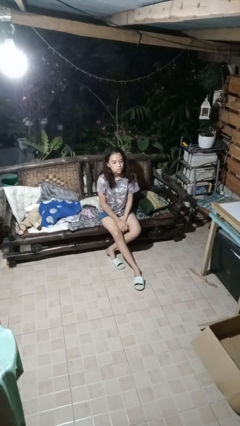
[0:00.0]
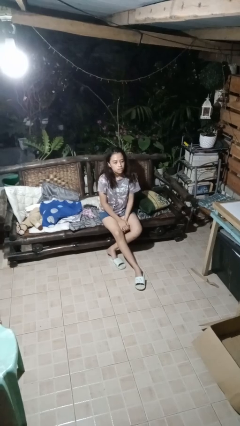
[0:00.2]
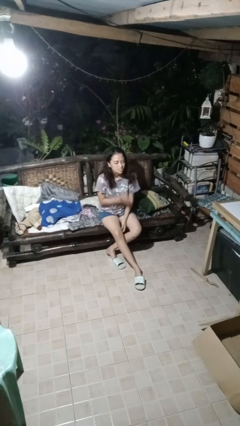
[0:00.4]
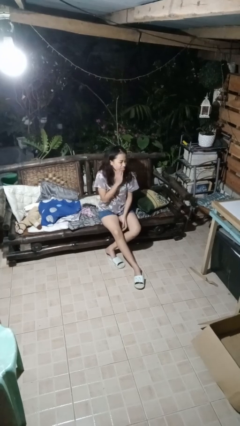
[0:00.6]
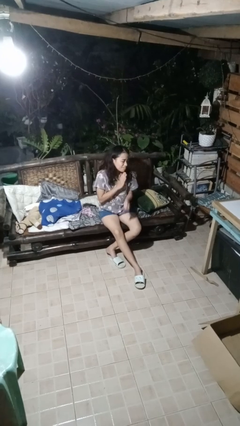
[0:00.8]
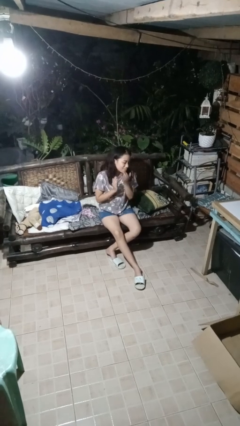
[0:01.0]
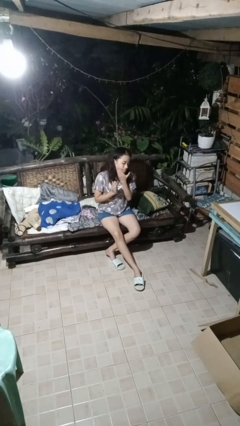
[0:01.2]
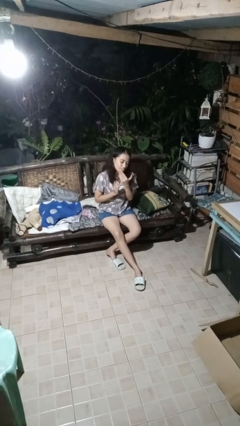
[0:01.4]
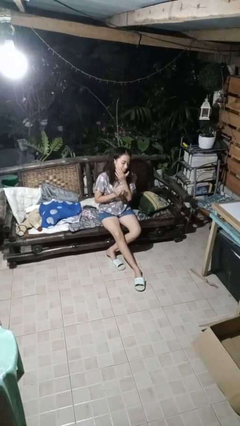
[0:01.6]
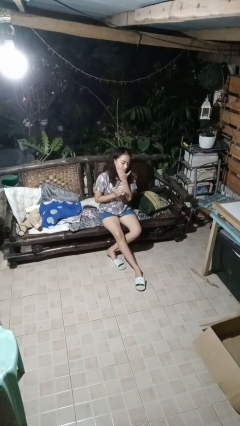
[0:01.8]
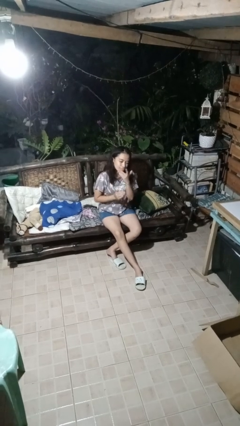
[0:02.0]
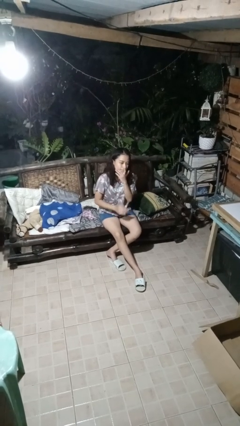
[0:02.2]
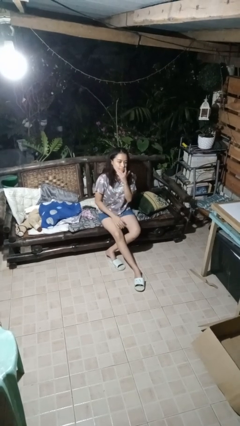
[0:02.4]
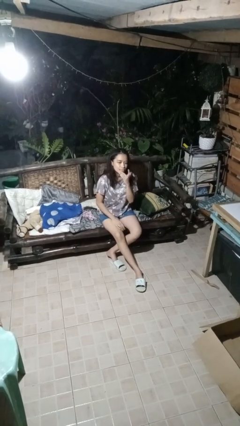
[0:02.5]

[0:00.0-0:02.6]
person swats bug

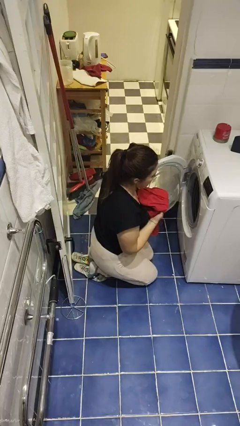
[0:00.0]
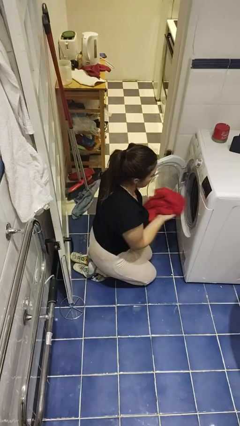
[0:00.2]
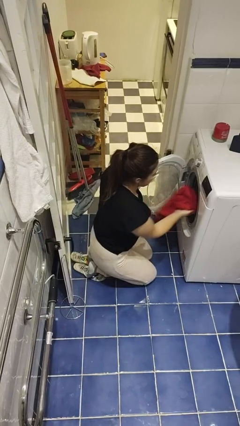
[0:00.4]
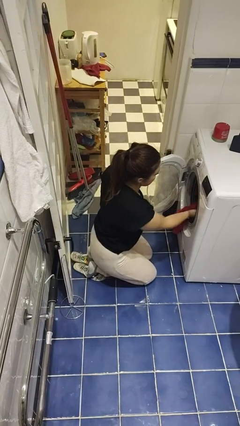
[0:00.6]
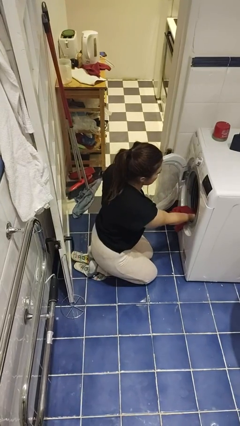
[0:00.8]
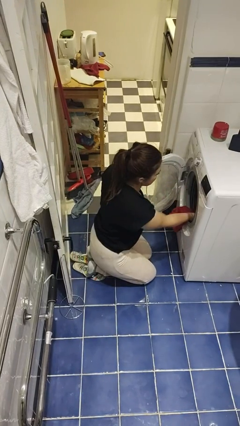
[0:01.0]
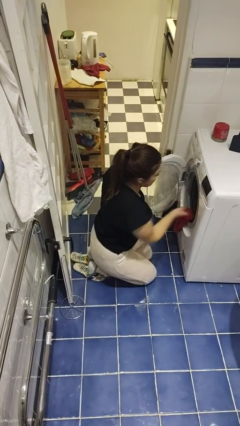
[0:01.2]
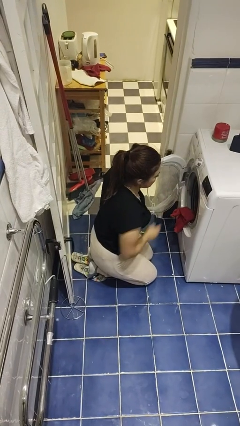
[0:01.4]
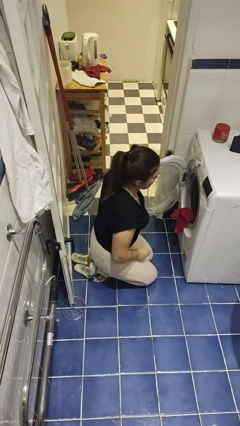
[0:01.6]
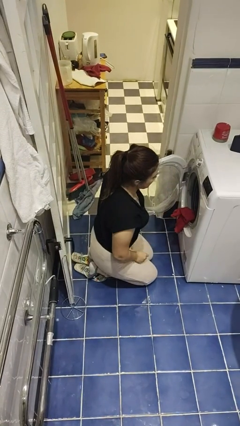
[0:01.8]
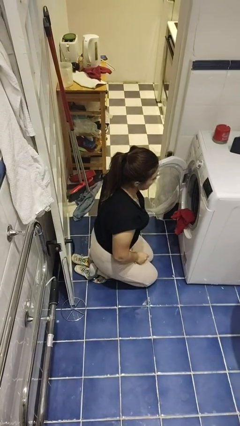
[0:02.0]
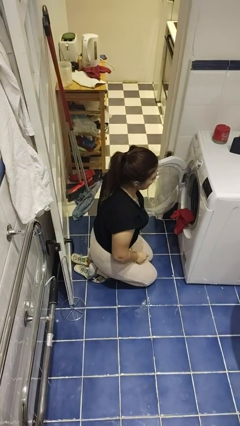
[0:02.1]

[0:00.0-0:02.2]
person loads dryer

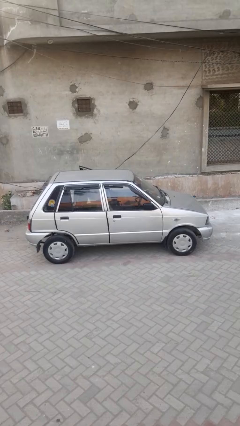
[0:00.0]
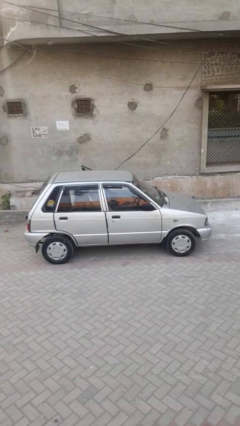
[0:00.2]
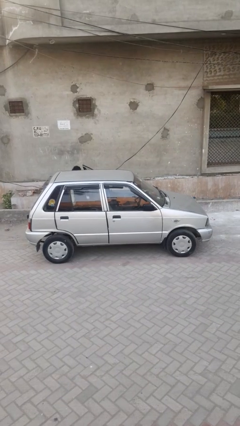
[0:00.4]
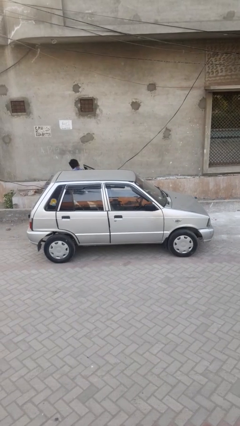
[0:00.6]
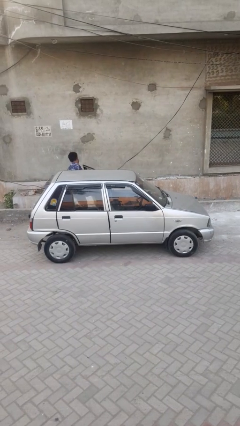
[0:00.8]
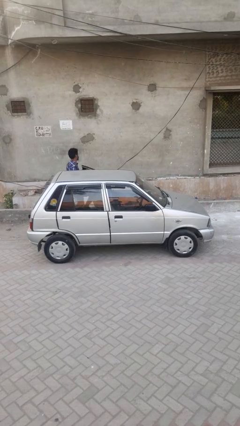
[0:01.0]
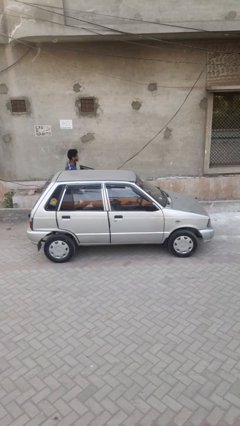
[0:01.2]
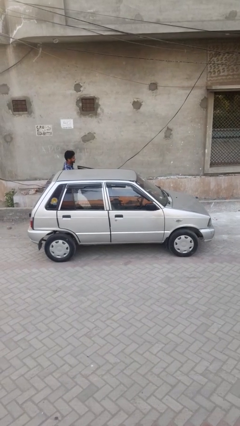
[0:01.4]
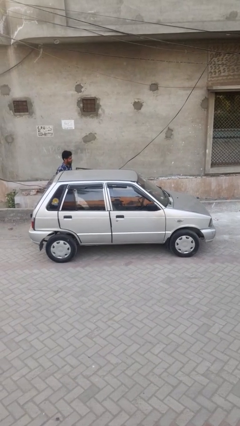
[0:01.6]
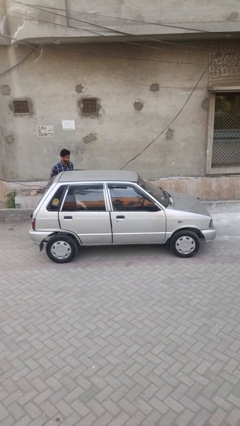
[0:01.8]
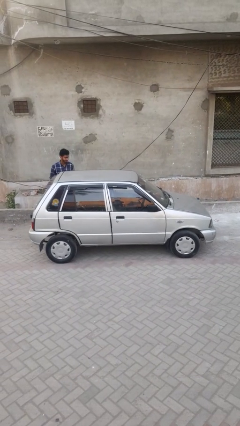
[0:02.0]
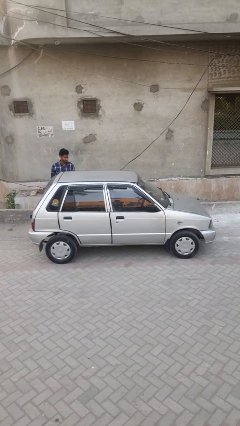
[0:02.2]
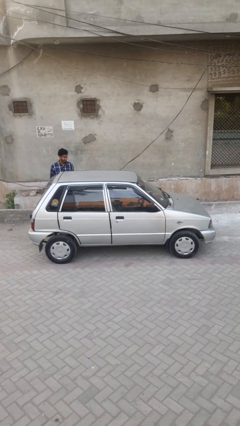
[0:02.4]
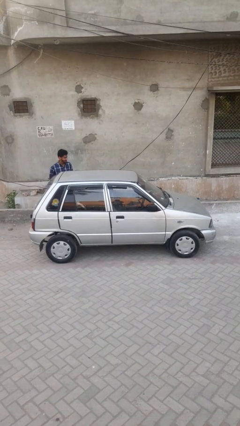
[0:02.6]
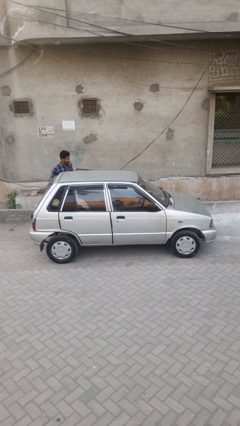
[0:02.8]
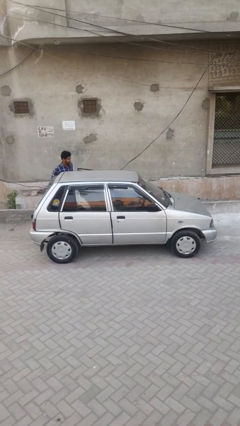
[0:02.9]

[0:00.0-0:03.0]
car drops off person

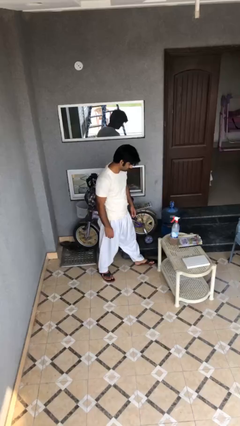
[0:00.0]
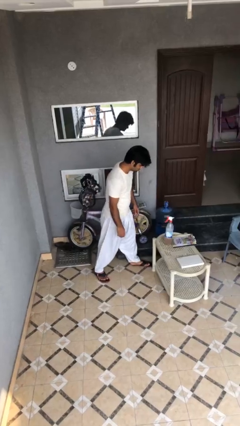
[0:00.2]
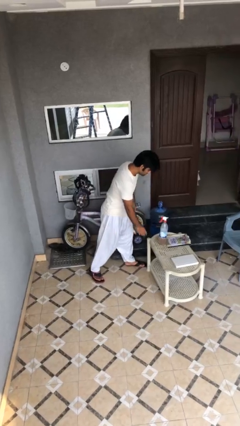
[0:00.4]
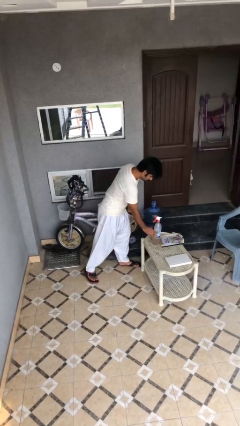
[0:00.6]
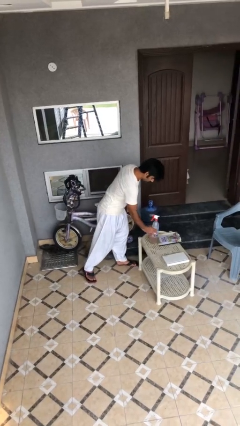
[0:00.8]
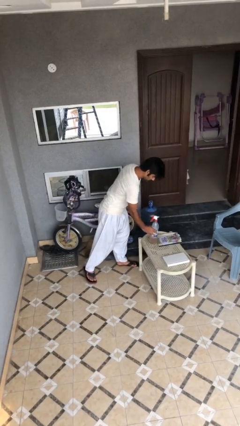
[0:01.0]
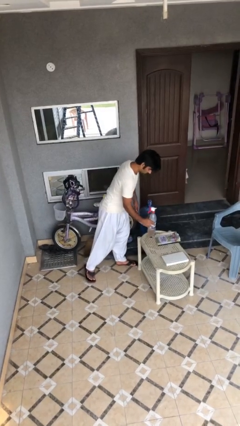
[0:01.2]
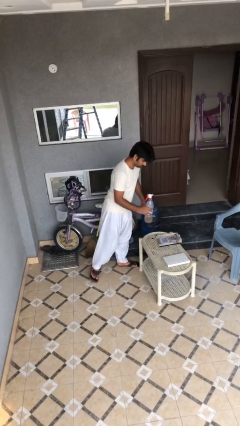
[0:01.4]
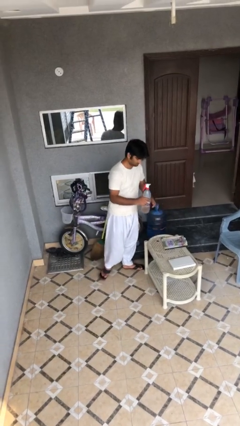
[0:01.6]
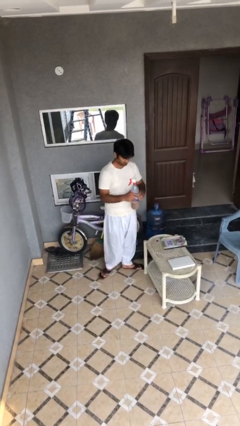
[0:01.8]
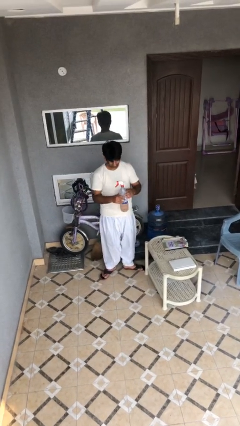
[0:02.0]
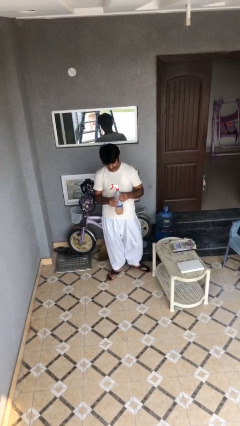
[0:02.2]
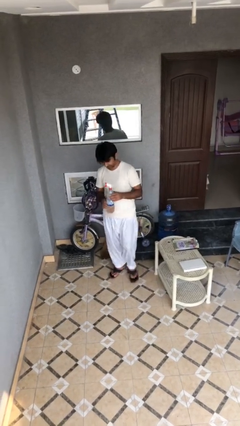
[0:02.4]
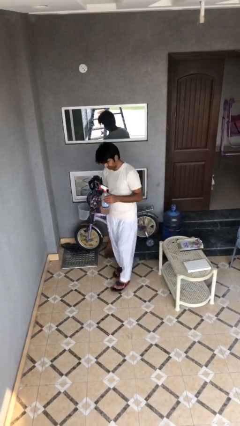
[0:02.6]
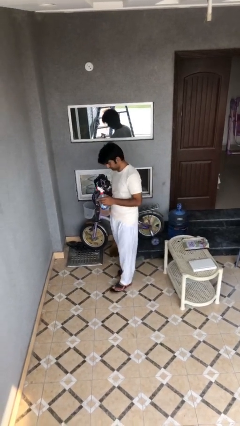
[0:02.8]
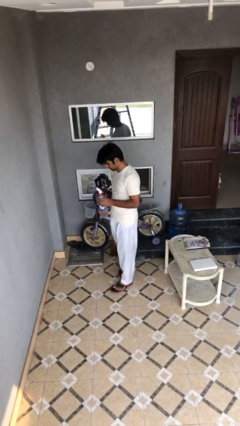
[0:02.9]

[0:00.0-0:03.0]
person picks up object from table

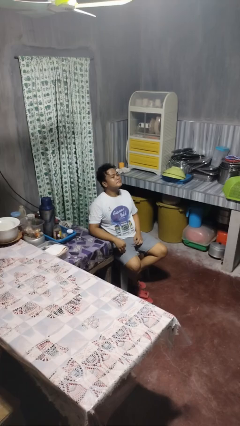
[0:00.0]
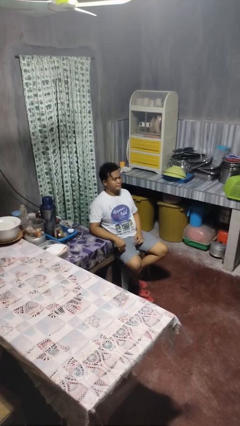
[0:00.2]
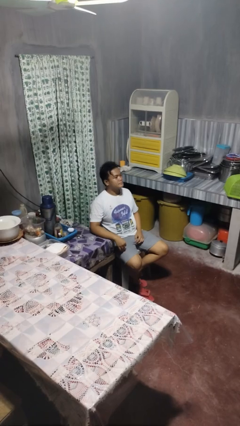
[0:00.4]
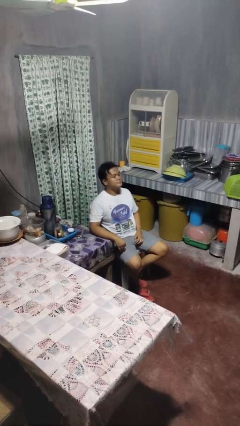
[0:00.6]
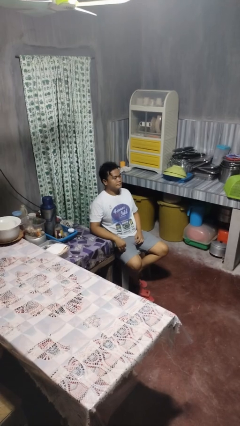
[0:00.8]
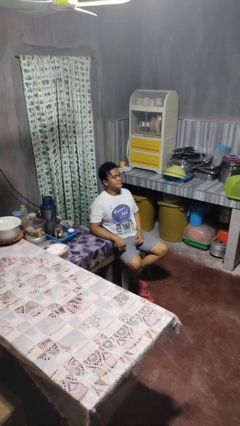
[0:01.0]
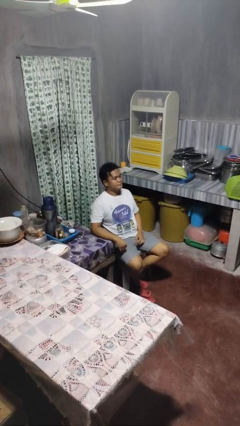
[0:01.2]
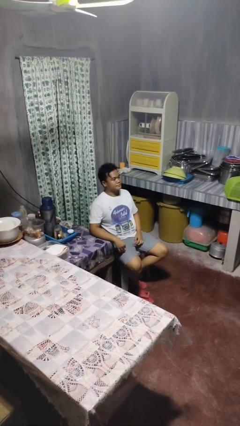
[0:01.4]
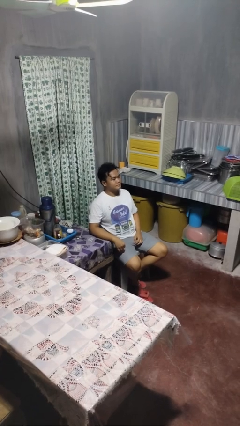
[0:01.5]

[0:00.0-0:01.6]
person nods head

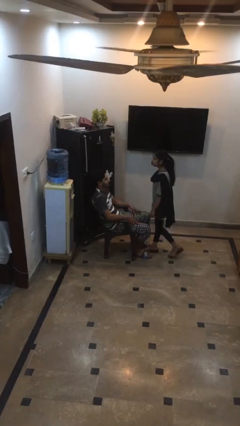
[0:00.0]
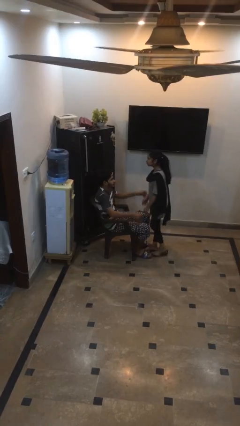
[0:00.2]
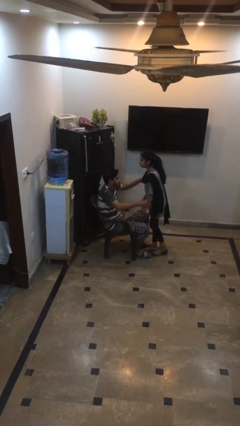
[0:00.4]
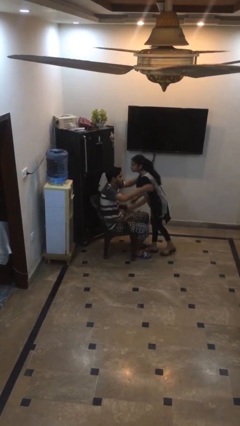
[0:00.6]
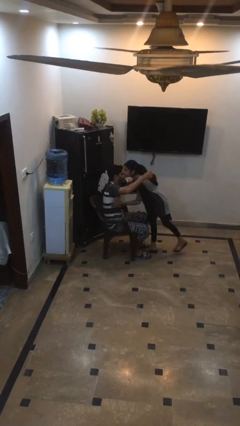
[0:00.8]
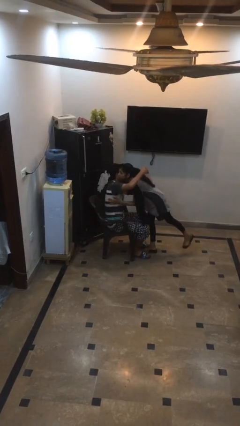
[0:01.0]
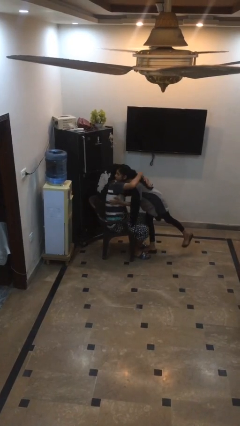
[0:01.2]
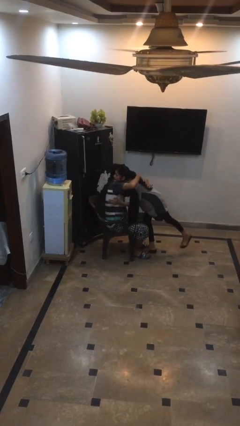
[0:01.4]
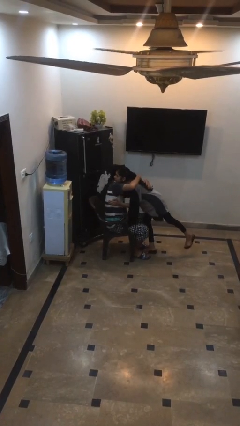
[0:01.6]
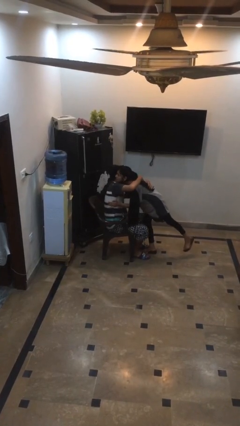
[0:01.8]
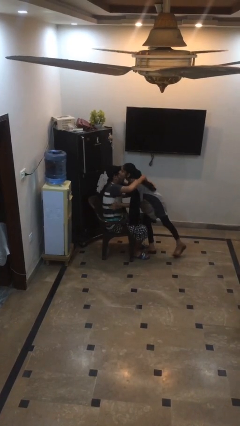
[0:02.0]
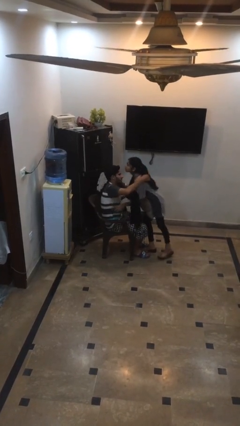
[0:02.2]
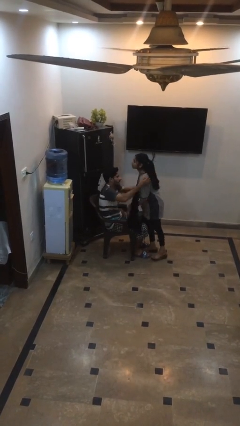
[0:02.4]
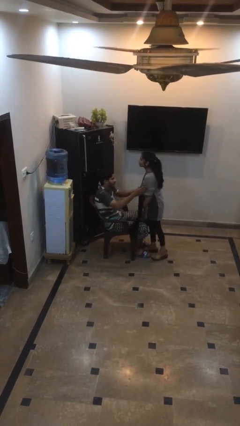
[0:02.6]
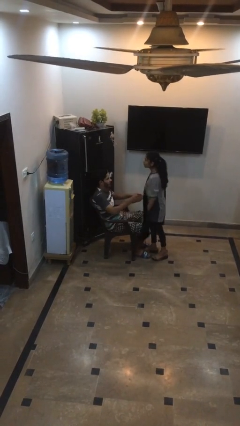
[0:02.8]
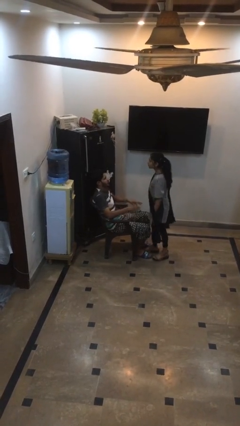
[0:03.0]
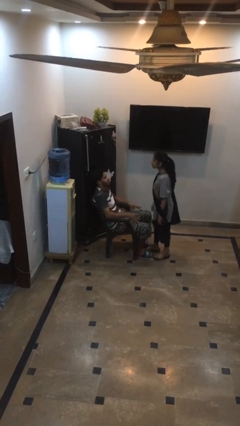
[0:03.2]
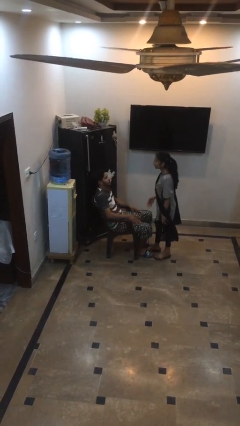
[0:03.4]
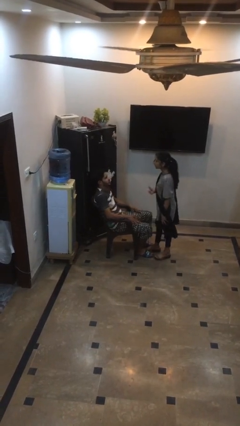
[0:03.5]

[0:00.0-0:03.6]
person embraces person

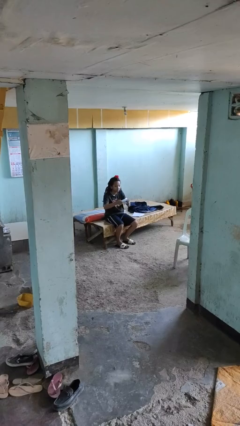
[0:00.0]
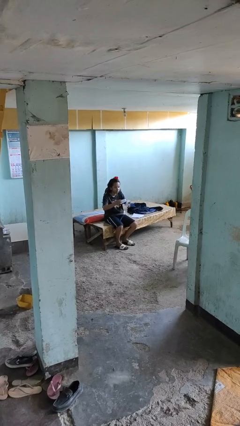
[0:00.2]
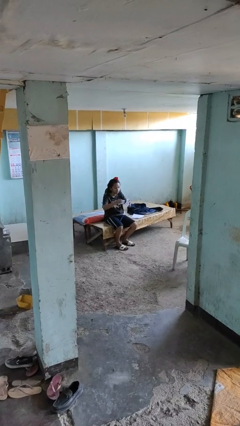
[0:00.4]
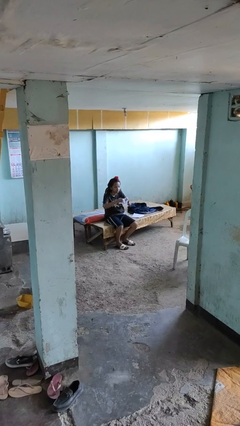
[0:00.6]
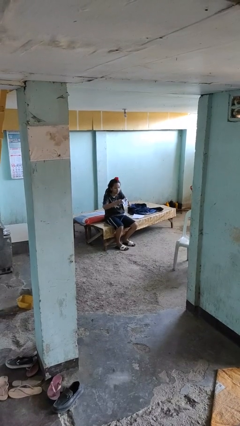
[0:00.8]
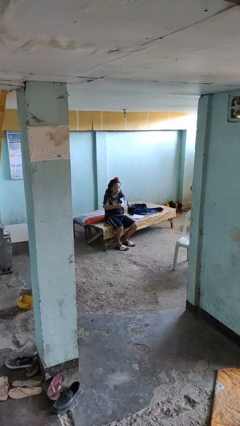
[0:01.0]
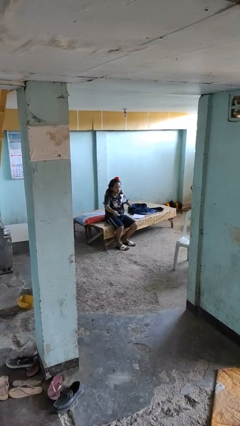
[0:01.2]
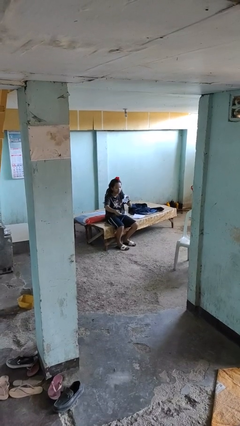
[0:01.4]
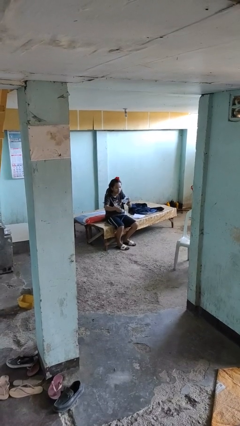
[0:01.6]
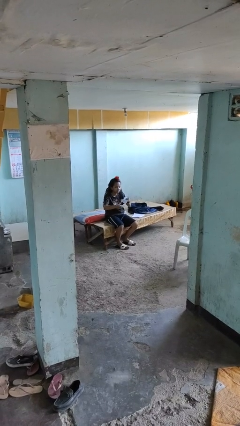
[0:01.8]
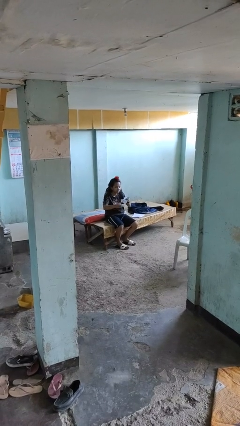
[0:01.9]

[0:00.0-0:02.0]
person tears paper
